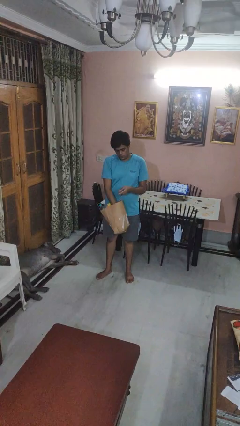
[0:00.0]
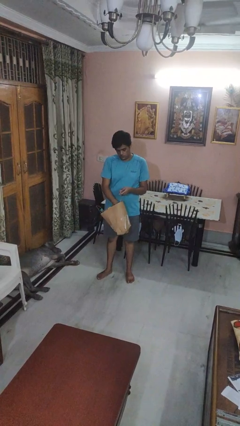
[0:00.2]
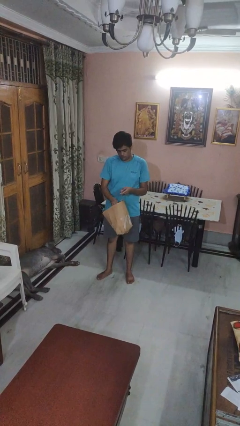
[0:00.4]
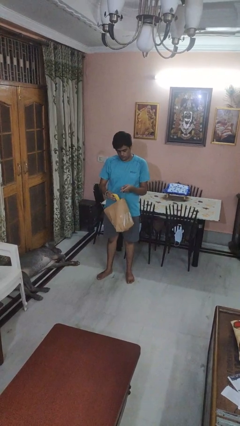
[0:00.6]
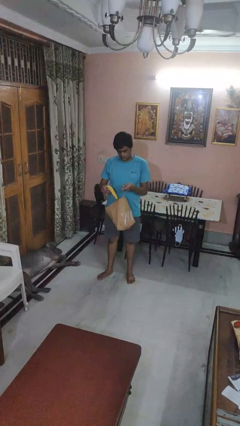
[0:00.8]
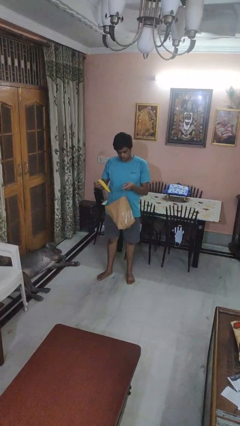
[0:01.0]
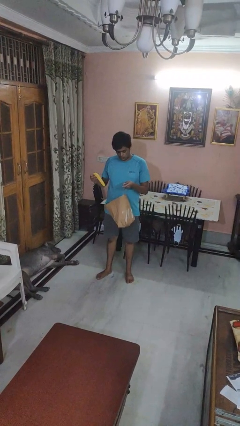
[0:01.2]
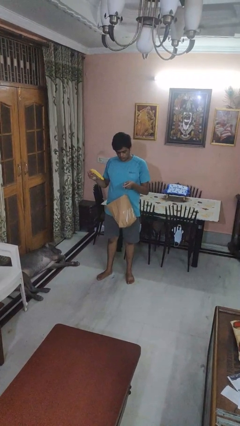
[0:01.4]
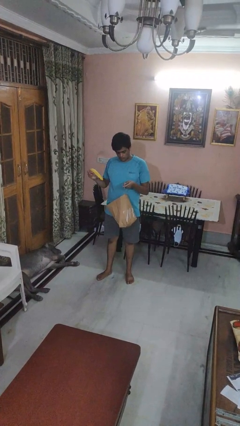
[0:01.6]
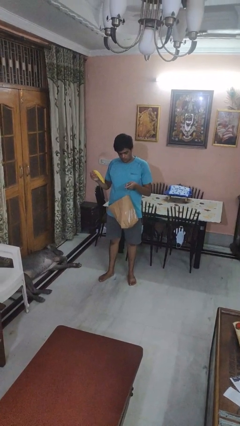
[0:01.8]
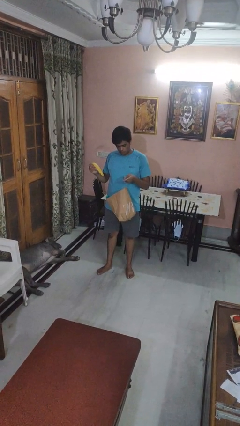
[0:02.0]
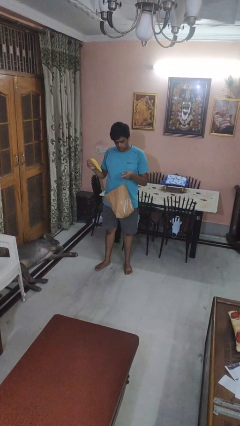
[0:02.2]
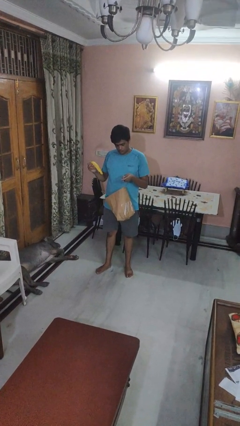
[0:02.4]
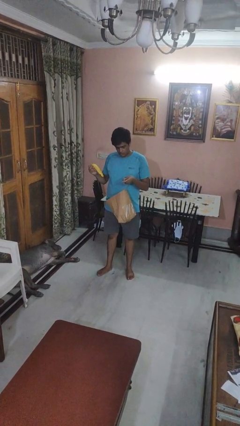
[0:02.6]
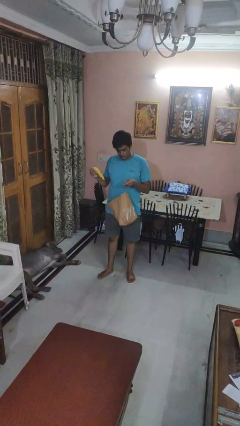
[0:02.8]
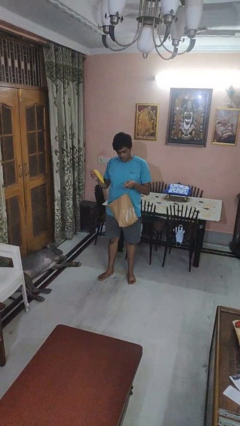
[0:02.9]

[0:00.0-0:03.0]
person takes object from bag

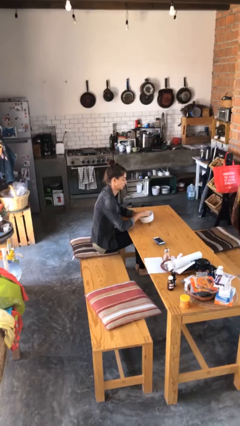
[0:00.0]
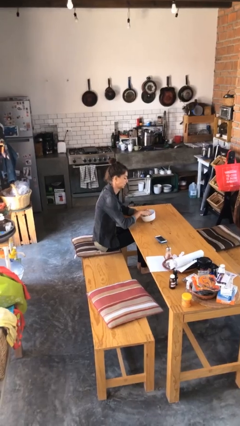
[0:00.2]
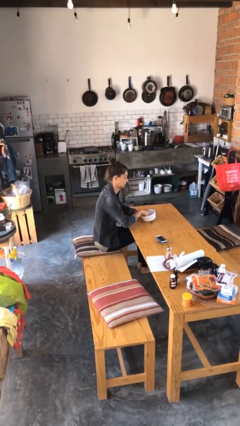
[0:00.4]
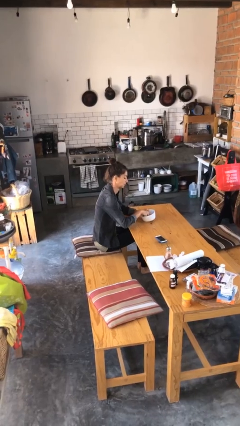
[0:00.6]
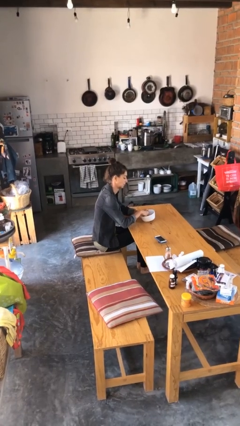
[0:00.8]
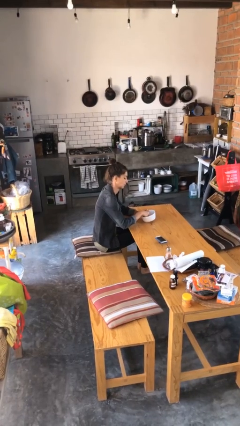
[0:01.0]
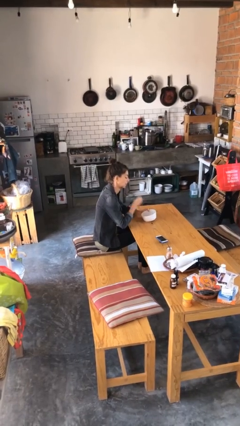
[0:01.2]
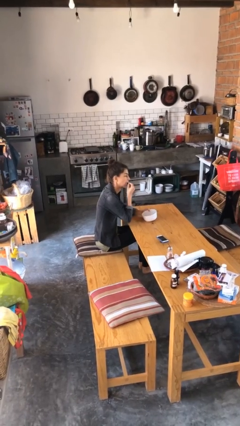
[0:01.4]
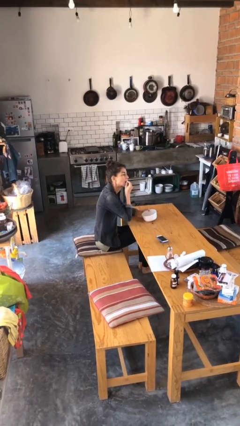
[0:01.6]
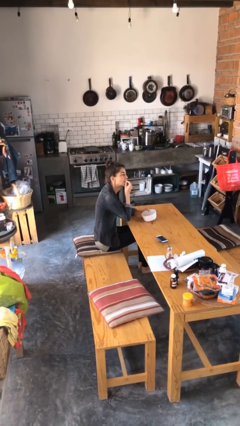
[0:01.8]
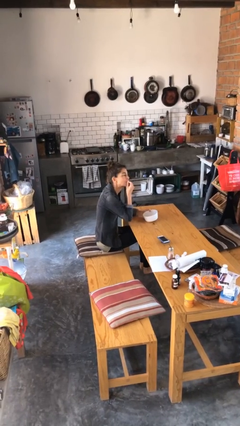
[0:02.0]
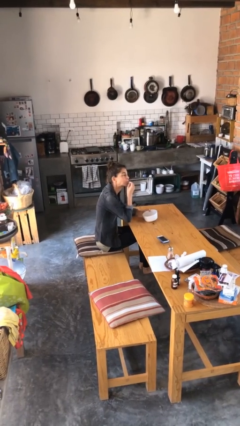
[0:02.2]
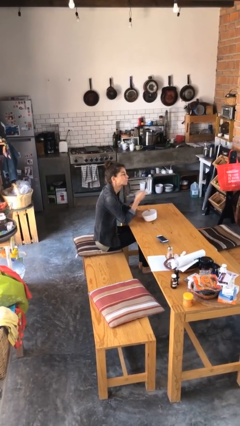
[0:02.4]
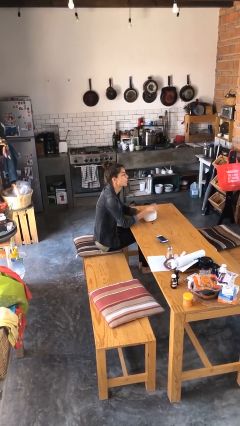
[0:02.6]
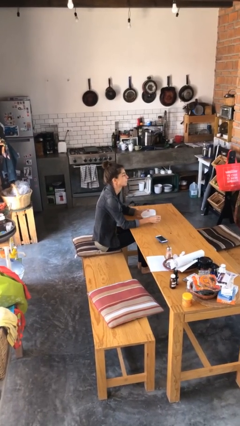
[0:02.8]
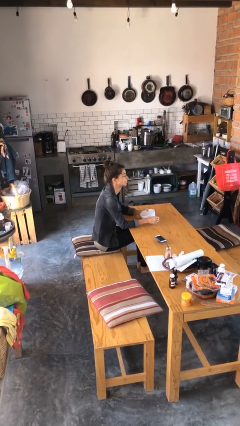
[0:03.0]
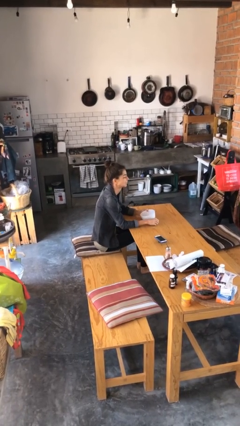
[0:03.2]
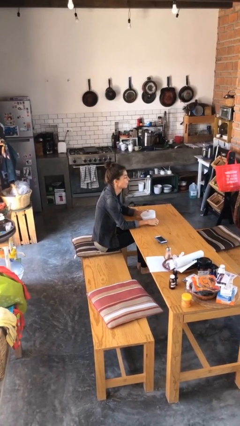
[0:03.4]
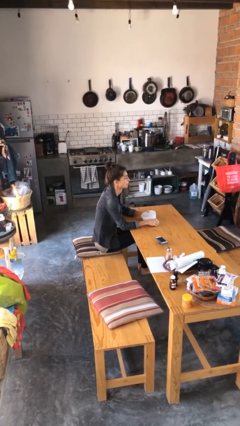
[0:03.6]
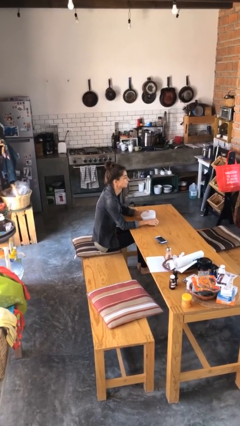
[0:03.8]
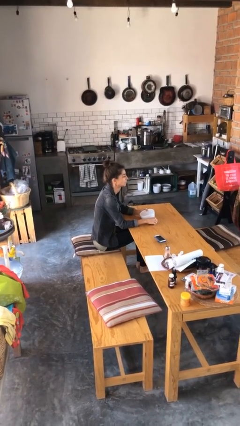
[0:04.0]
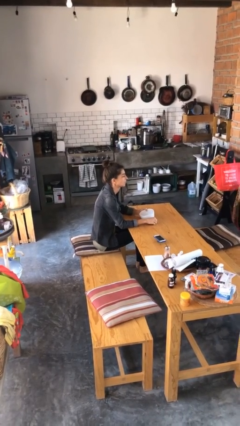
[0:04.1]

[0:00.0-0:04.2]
person eats with hands

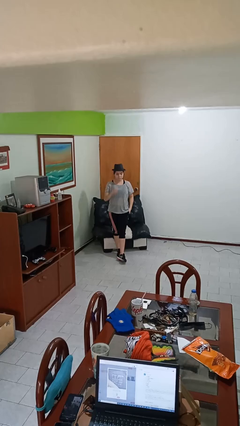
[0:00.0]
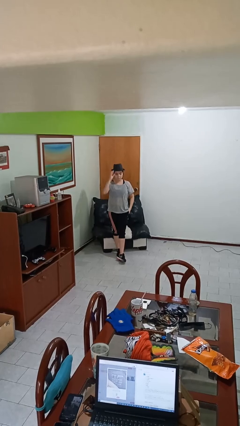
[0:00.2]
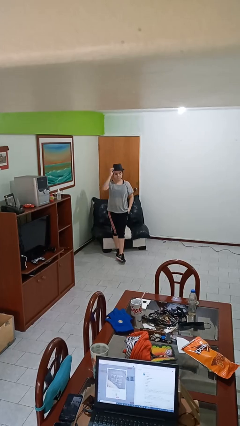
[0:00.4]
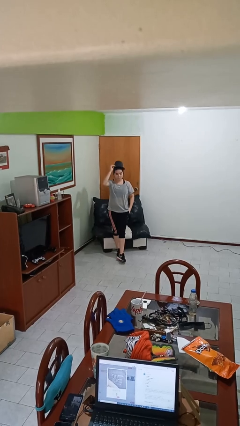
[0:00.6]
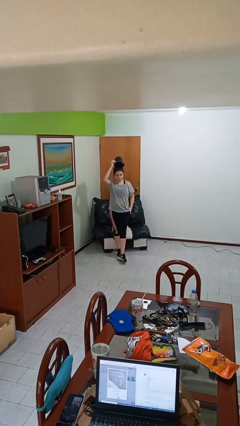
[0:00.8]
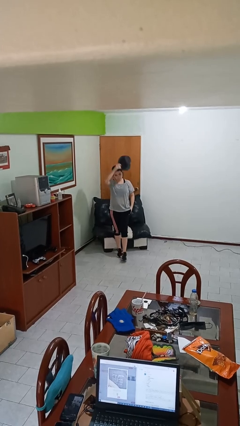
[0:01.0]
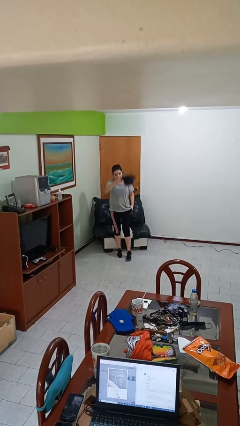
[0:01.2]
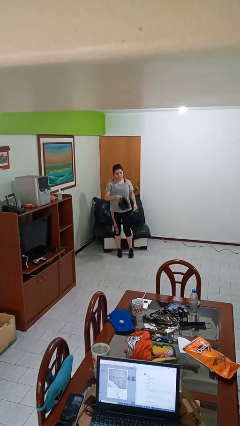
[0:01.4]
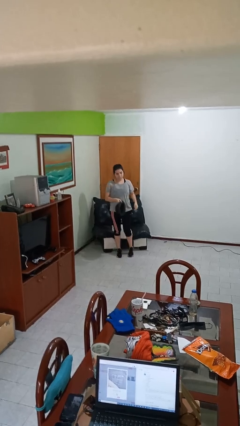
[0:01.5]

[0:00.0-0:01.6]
person takes off hat

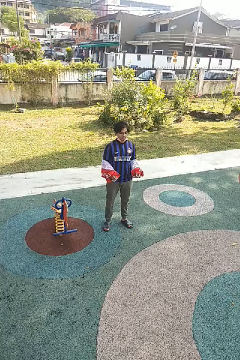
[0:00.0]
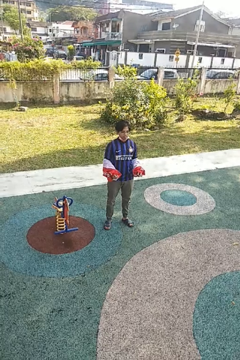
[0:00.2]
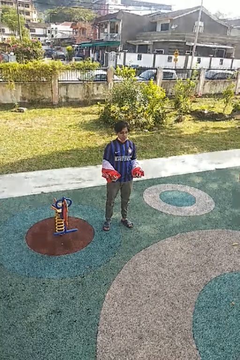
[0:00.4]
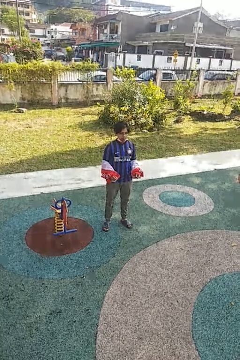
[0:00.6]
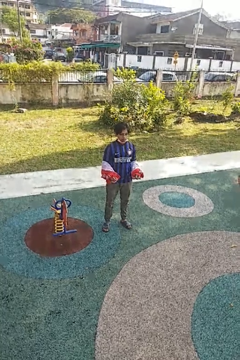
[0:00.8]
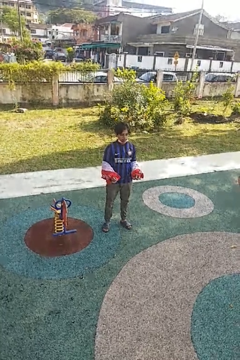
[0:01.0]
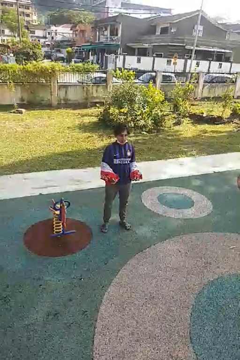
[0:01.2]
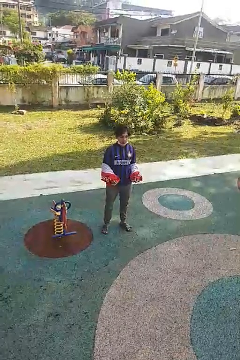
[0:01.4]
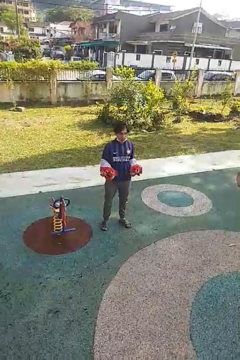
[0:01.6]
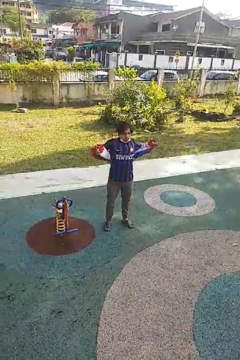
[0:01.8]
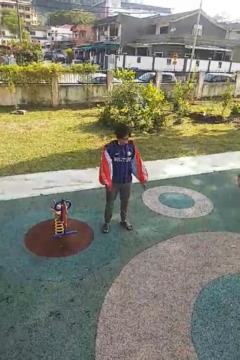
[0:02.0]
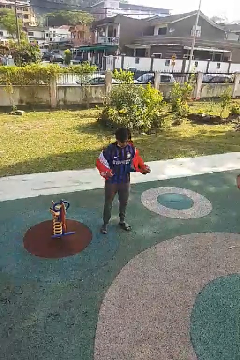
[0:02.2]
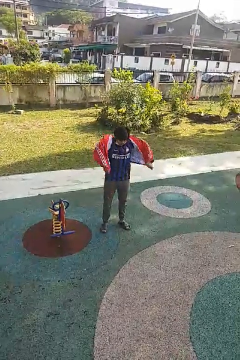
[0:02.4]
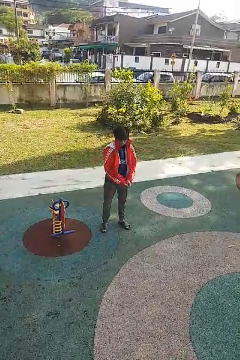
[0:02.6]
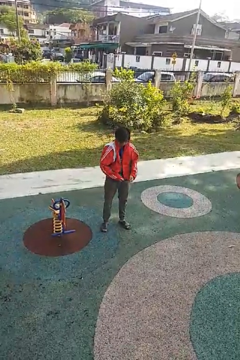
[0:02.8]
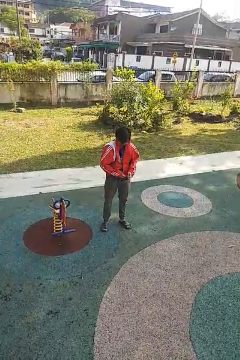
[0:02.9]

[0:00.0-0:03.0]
person puts on jacket

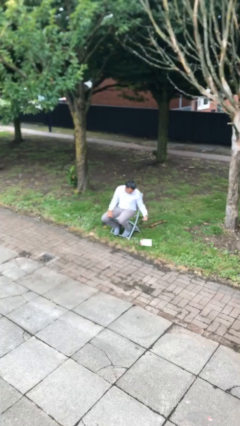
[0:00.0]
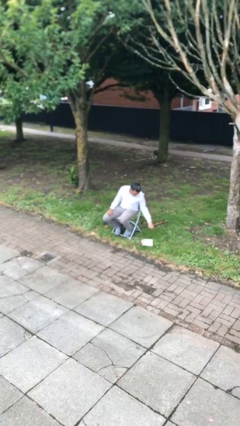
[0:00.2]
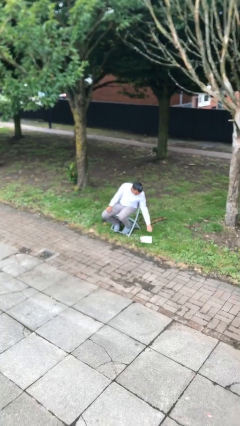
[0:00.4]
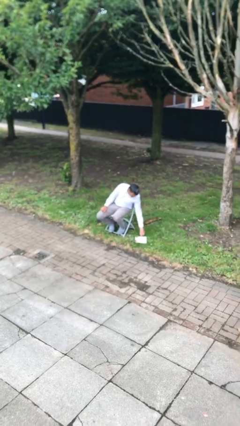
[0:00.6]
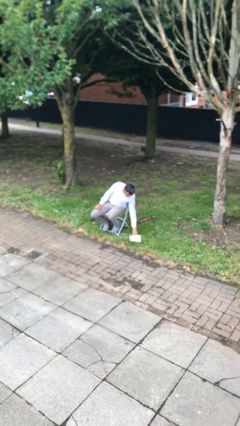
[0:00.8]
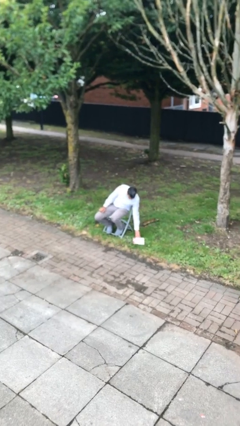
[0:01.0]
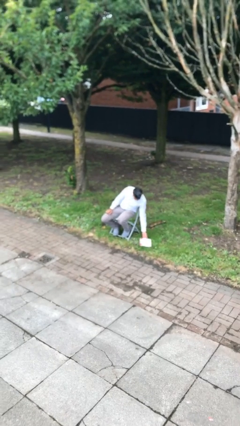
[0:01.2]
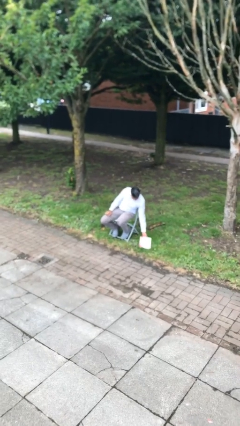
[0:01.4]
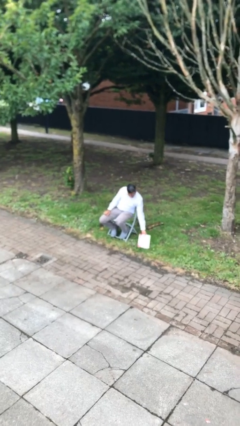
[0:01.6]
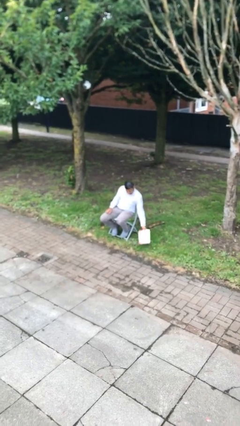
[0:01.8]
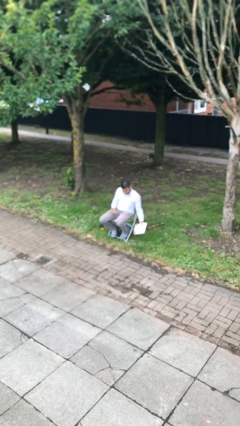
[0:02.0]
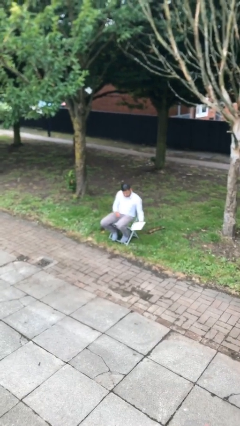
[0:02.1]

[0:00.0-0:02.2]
person picks up object from floor

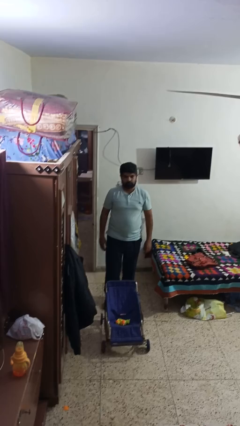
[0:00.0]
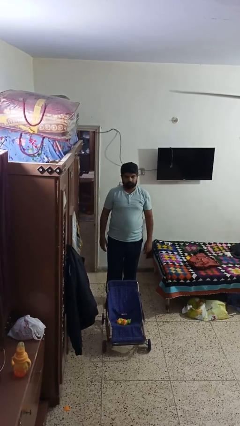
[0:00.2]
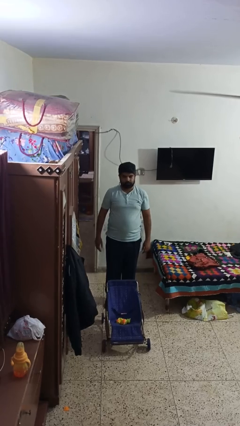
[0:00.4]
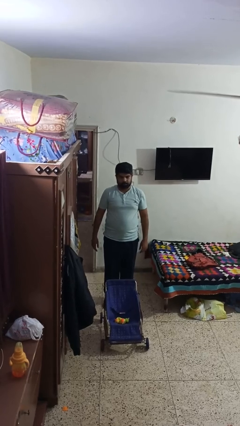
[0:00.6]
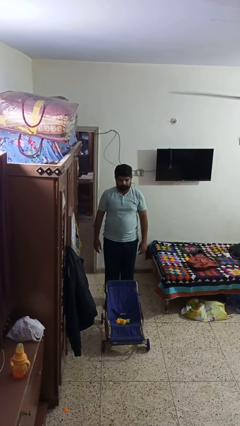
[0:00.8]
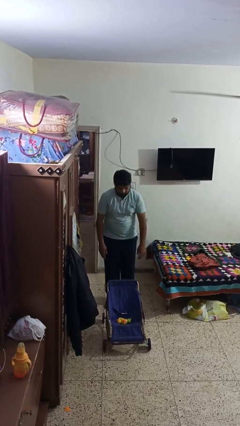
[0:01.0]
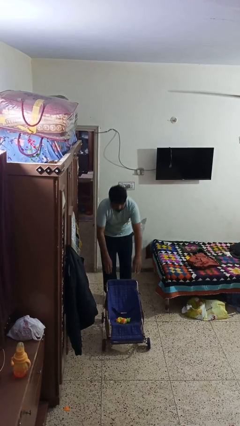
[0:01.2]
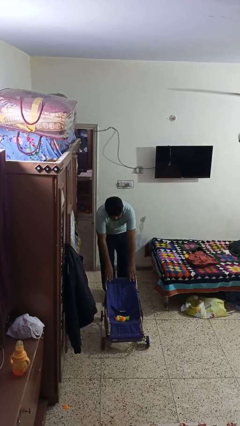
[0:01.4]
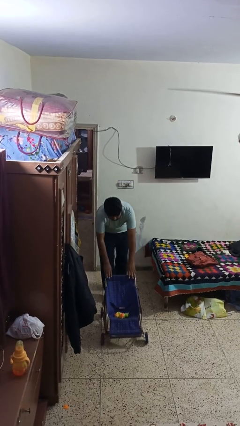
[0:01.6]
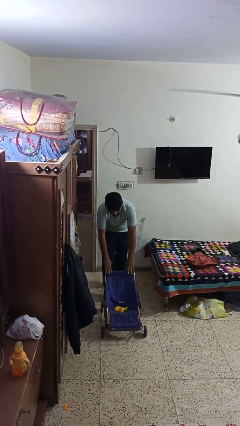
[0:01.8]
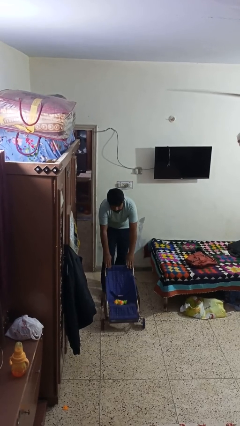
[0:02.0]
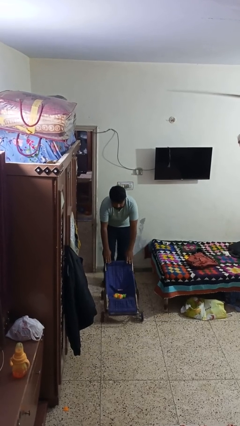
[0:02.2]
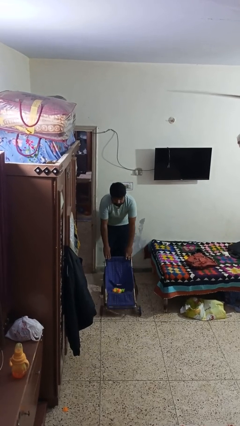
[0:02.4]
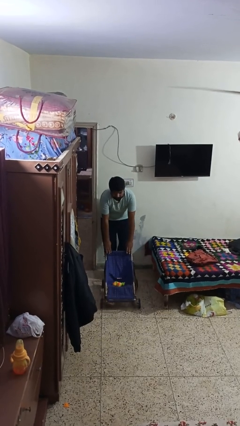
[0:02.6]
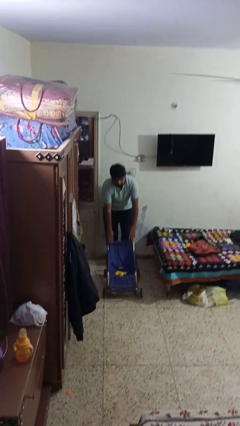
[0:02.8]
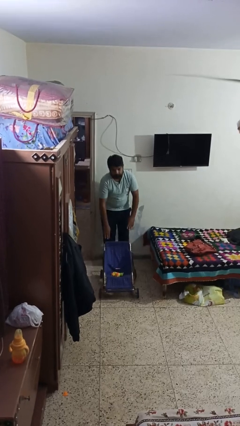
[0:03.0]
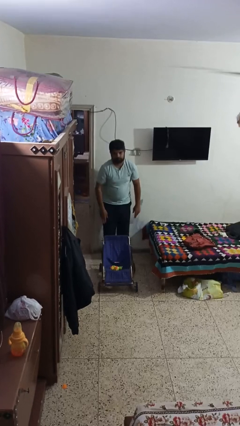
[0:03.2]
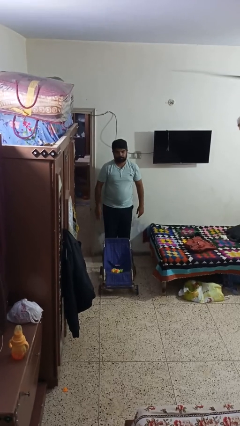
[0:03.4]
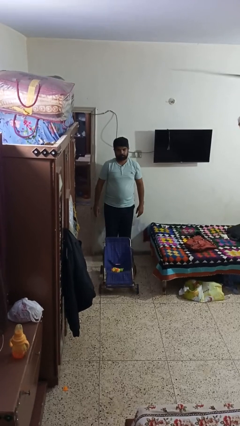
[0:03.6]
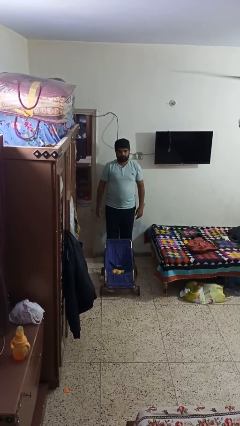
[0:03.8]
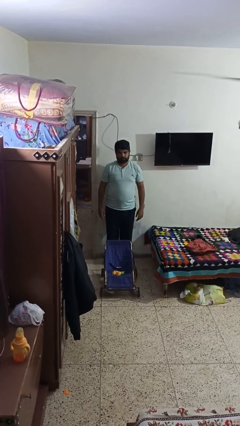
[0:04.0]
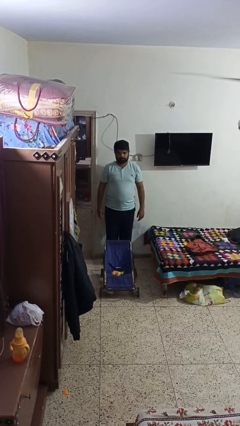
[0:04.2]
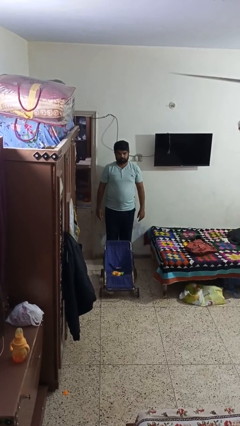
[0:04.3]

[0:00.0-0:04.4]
person pulls wheeled cart
